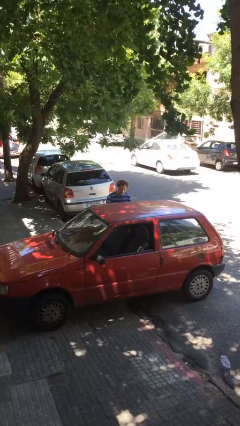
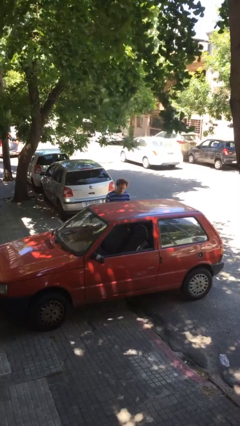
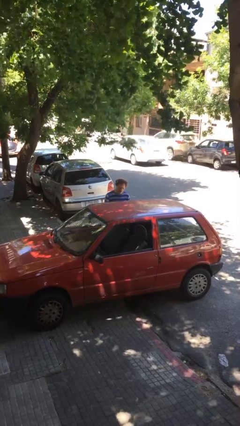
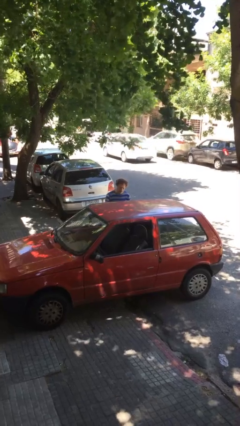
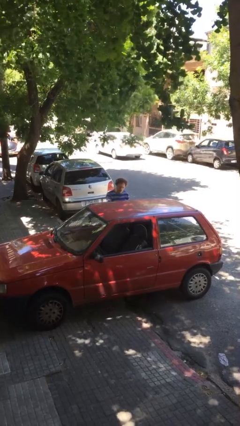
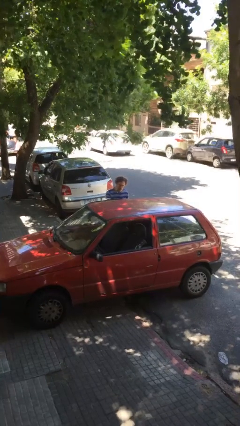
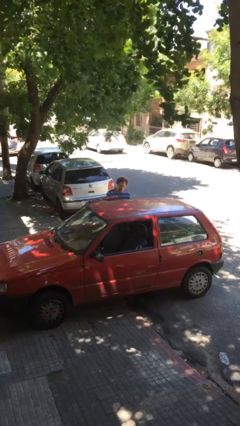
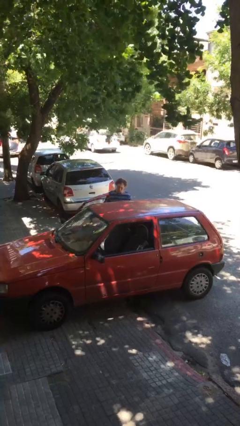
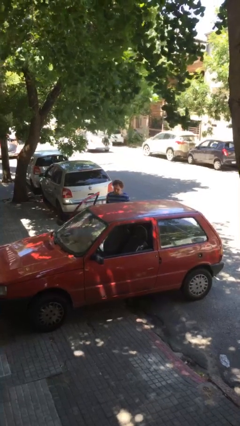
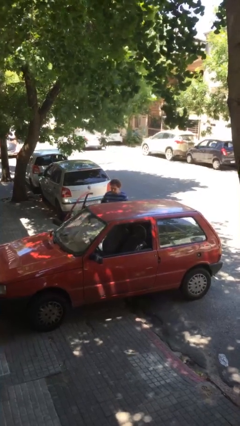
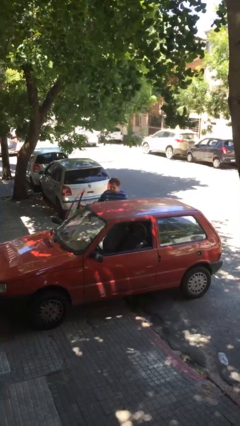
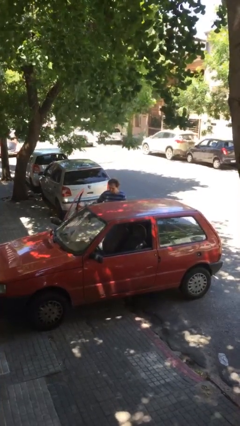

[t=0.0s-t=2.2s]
person opens car door

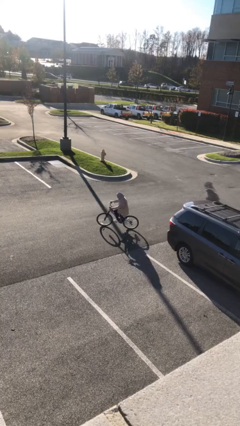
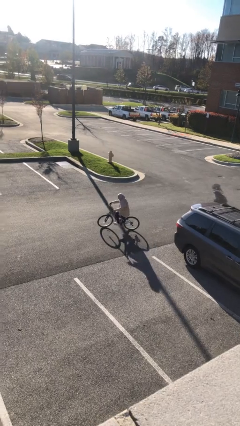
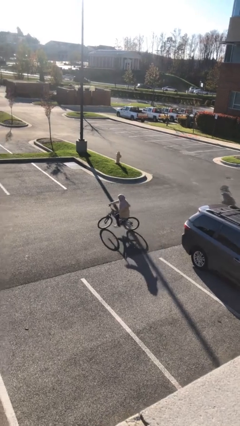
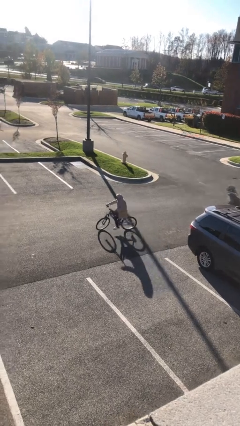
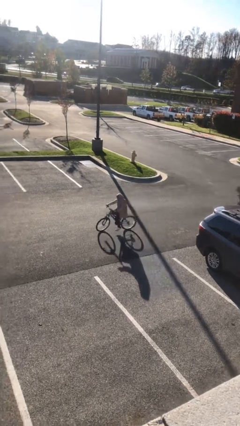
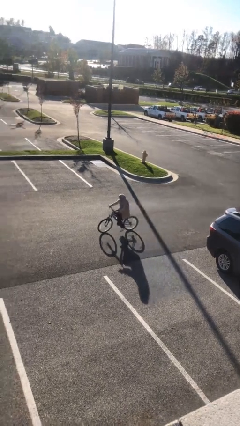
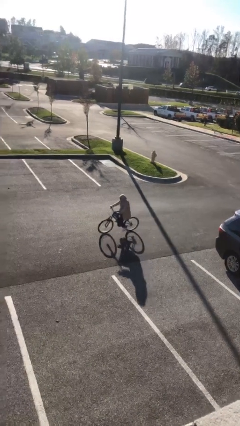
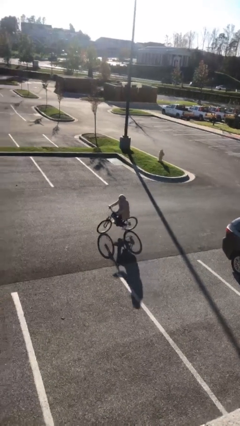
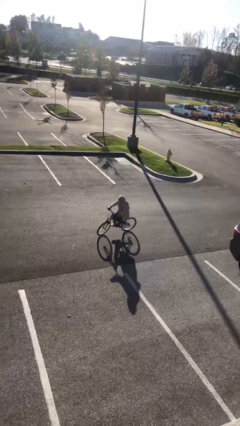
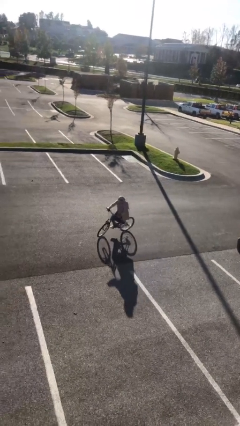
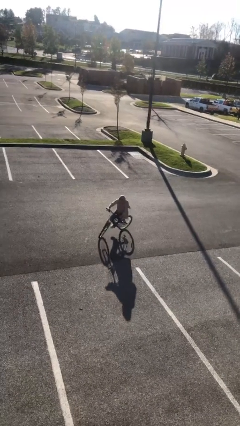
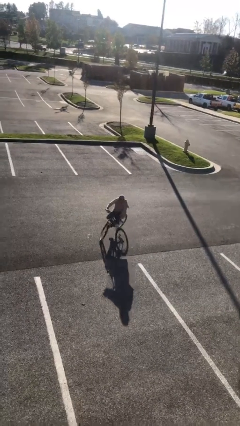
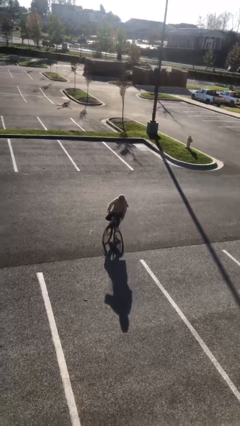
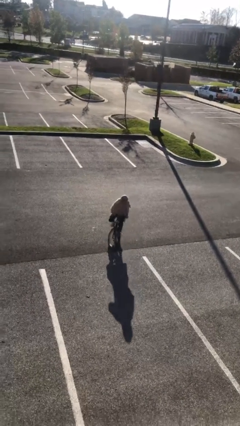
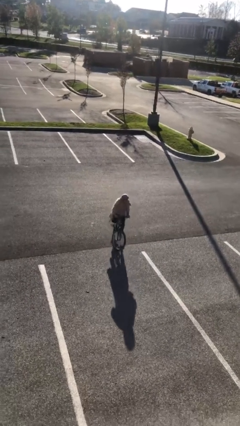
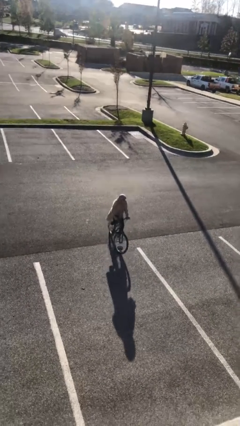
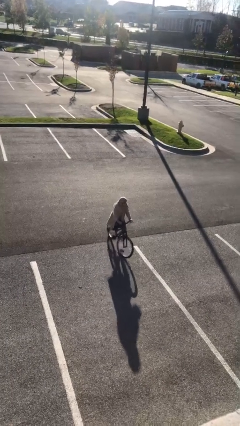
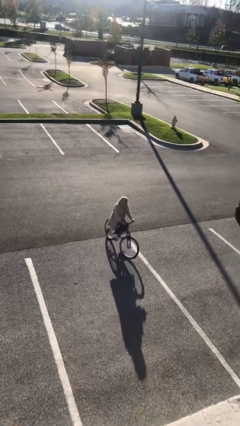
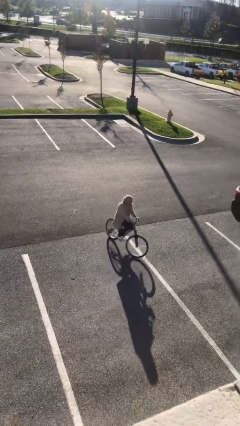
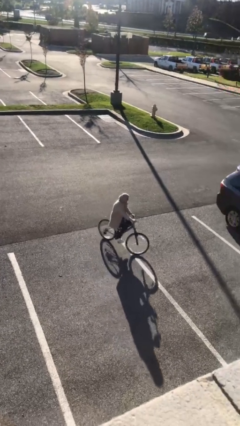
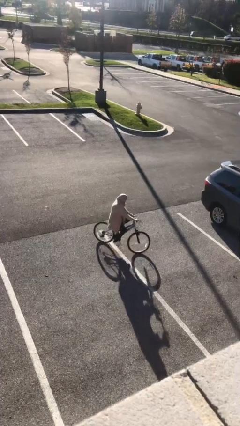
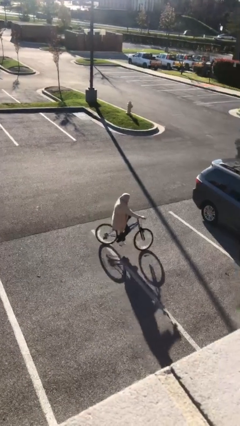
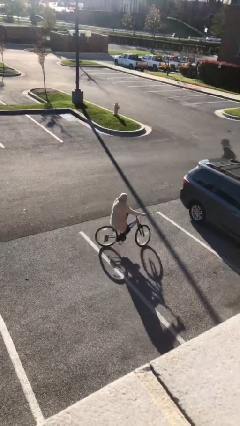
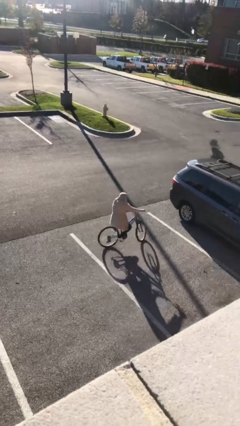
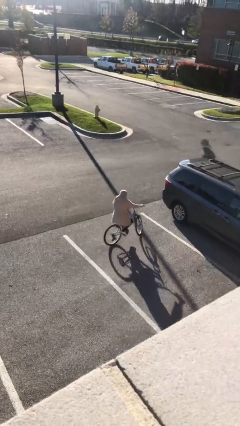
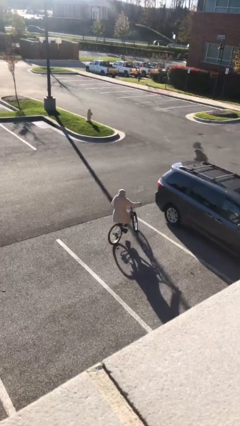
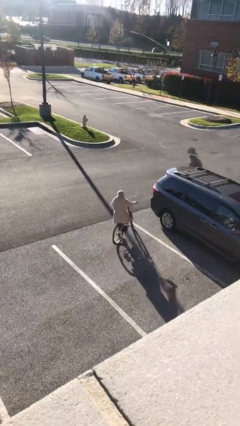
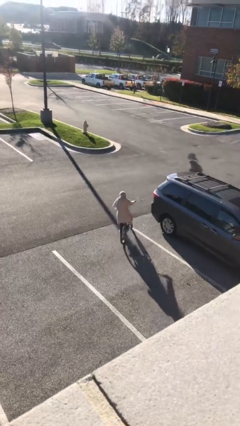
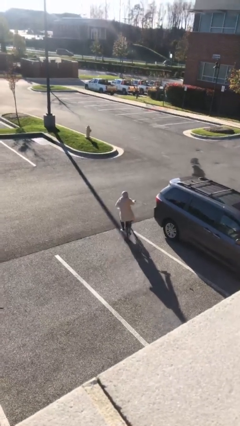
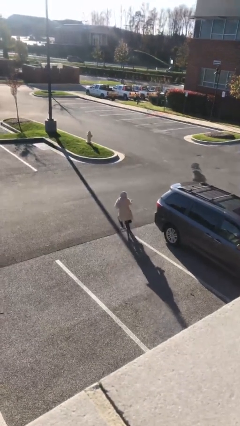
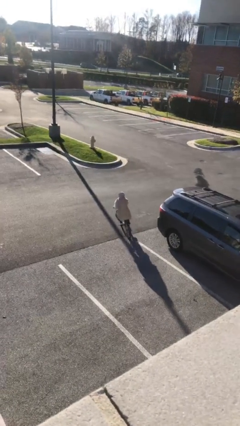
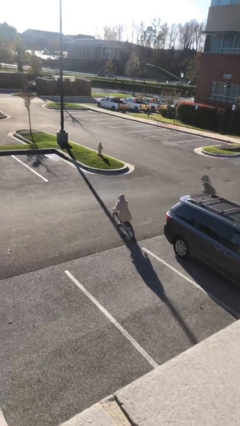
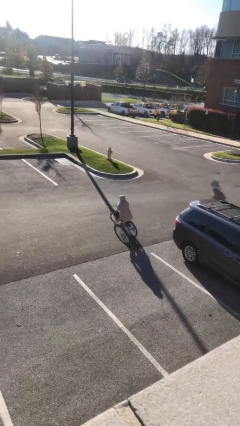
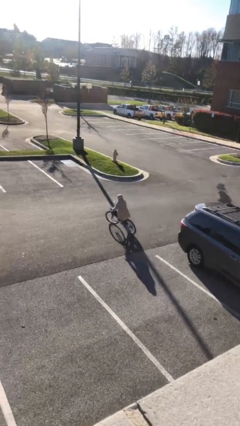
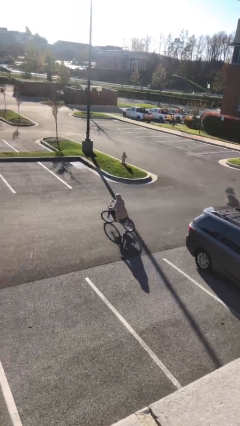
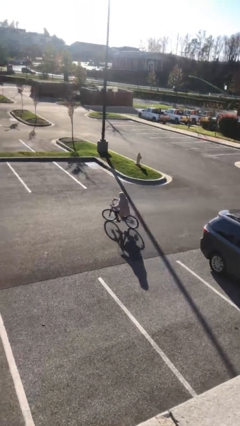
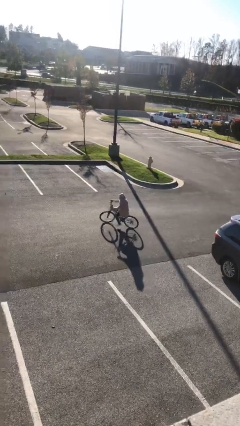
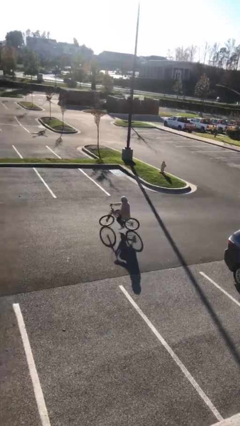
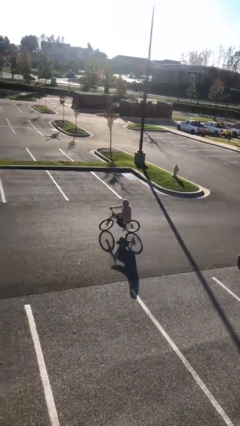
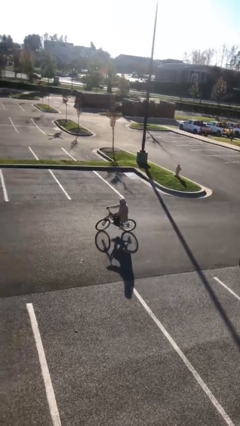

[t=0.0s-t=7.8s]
person rides bicycle

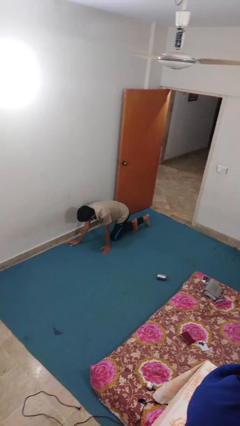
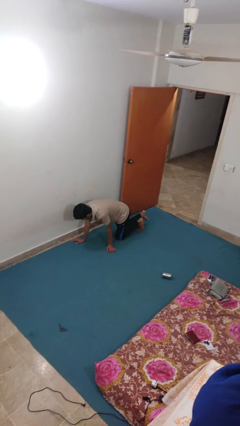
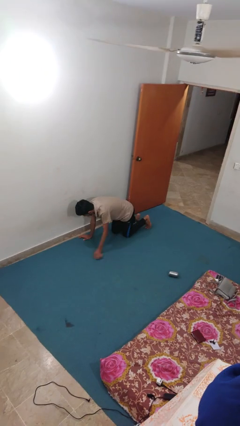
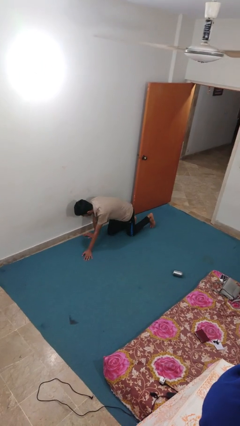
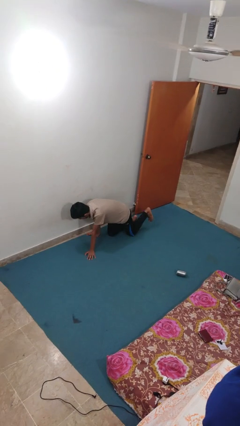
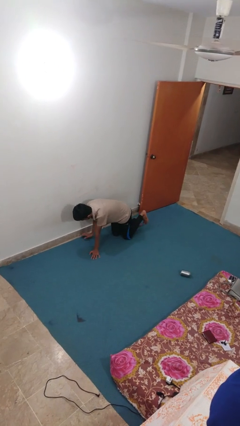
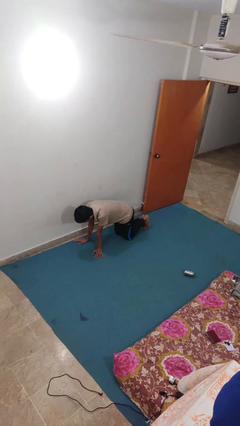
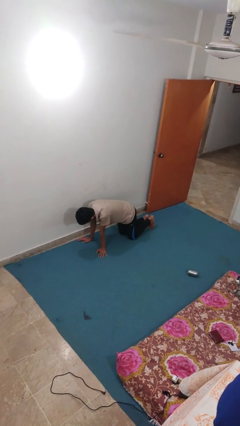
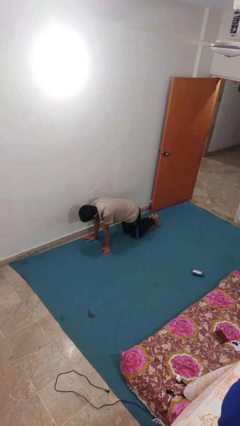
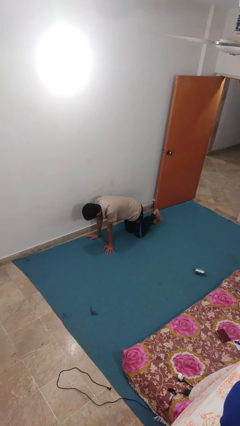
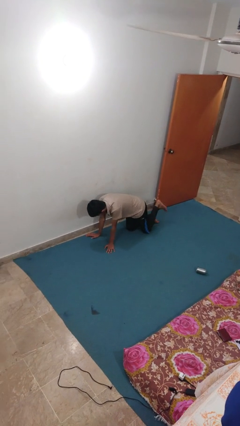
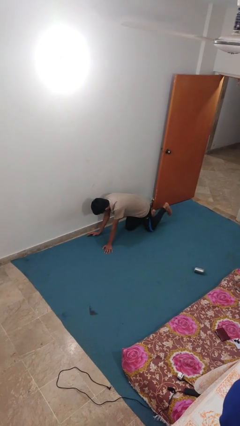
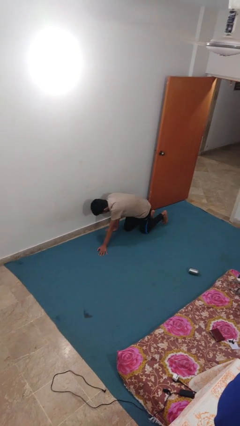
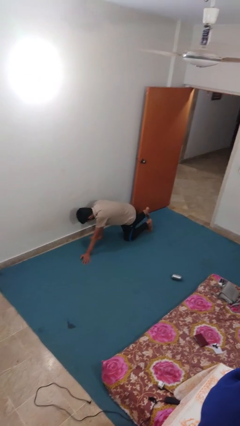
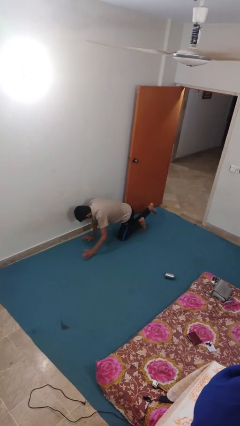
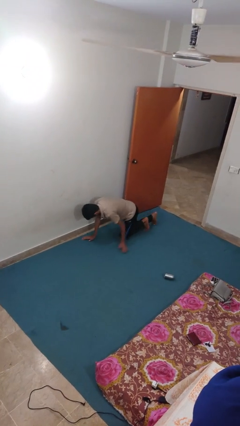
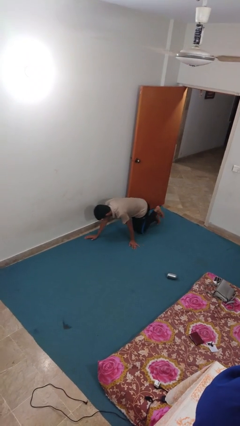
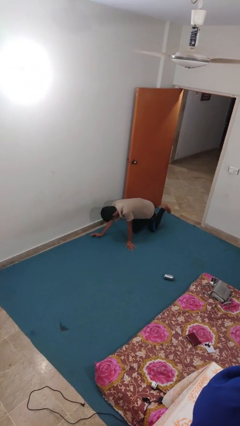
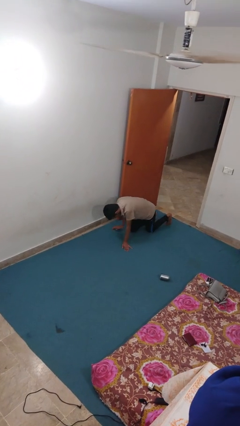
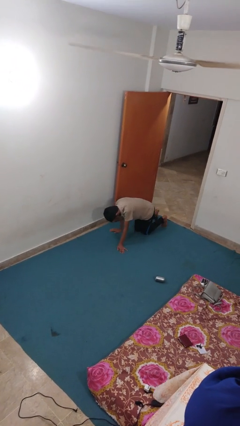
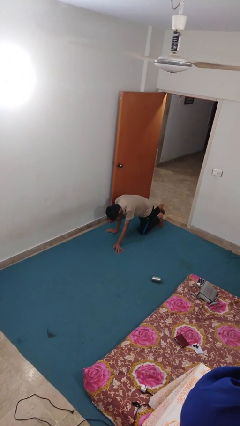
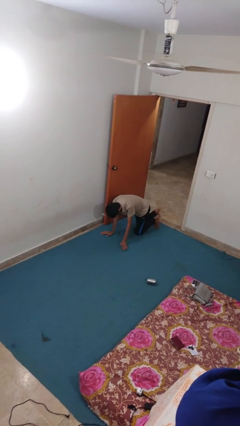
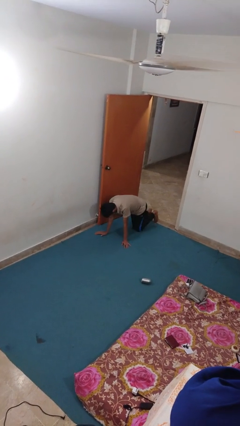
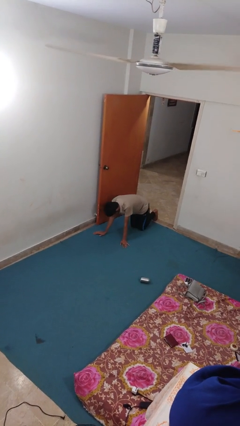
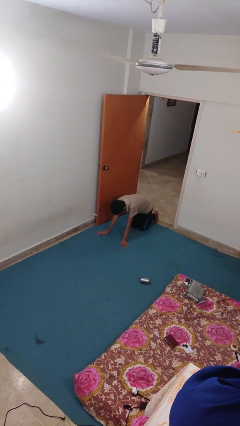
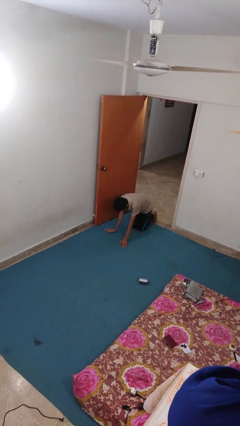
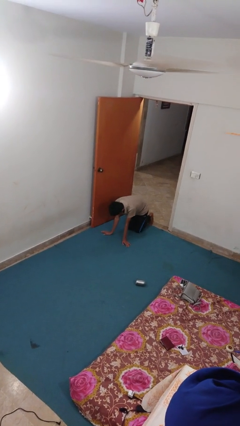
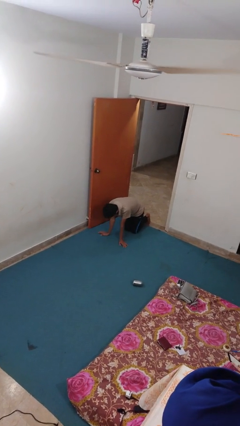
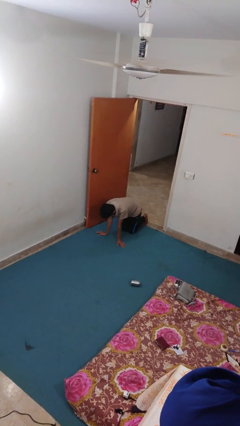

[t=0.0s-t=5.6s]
person crawls

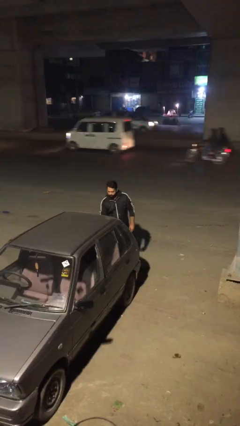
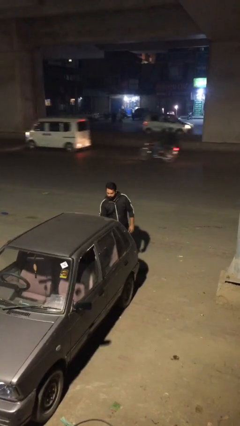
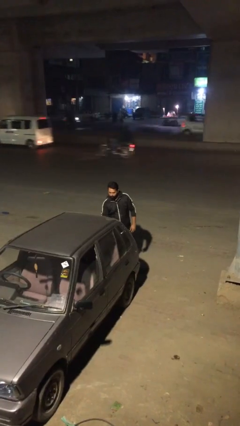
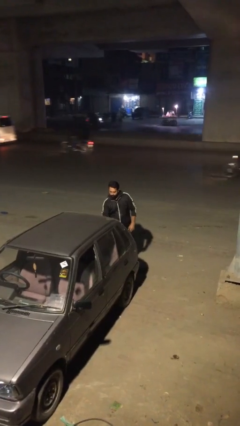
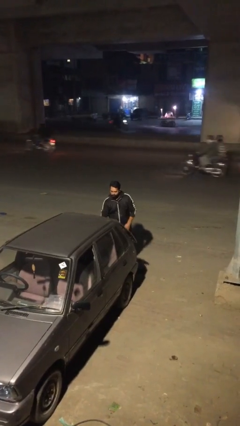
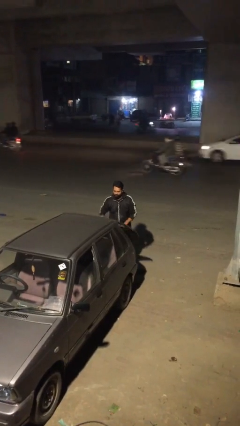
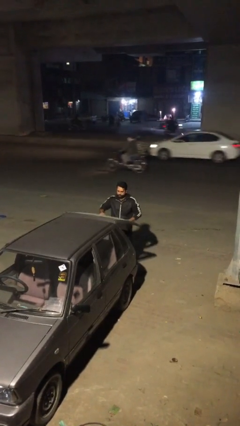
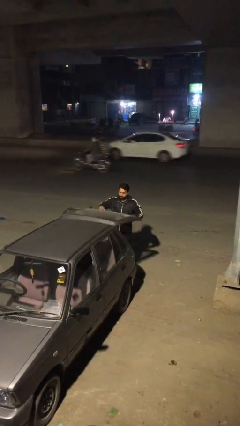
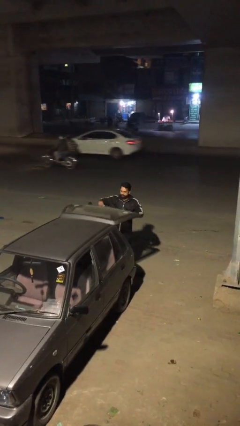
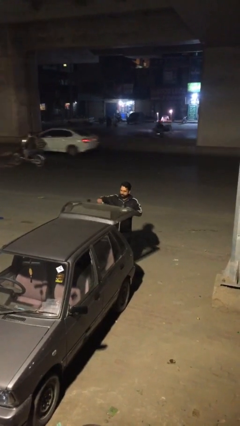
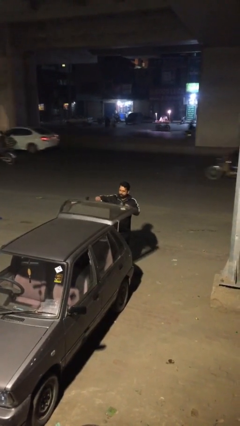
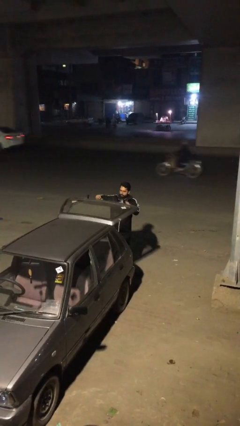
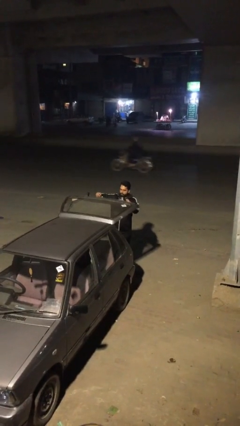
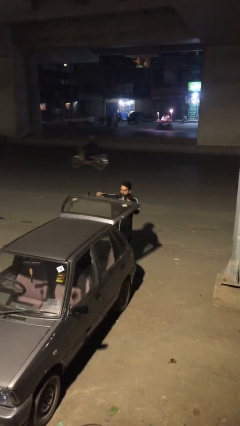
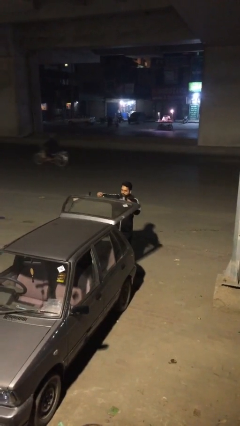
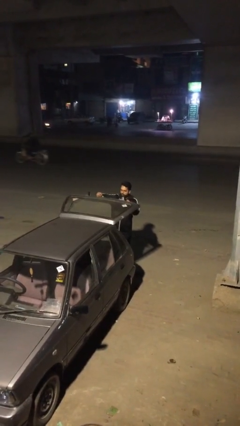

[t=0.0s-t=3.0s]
person opens car trunk
